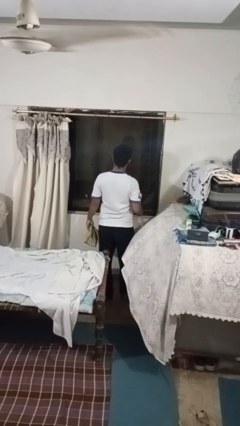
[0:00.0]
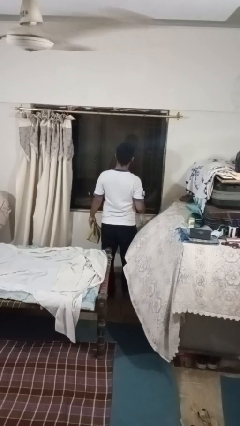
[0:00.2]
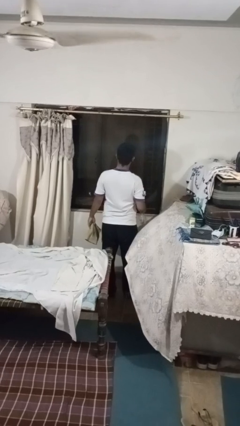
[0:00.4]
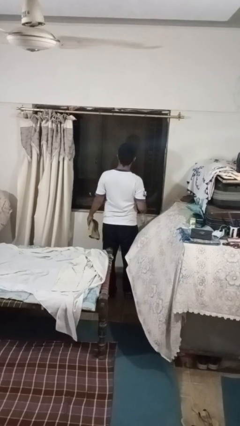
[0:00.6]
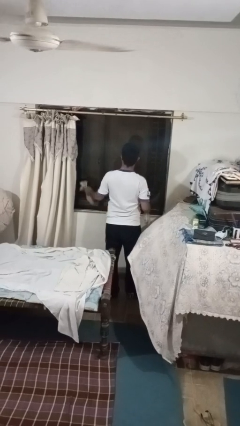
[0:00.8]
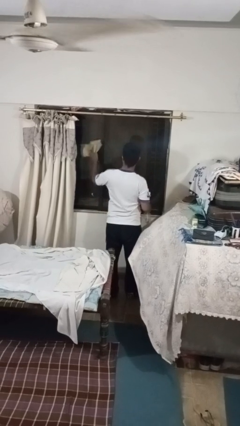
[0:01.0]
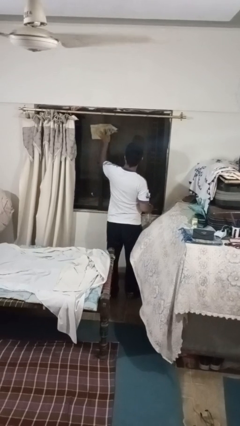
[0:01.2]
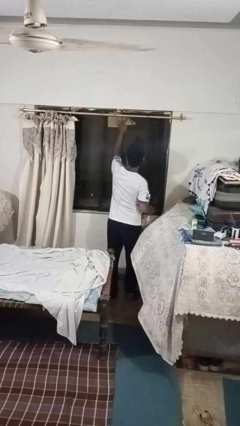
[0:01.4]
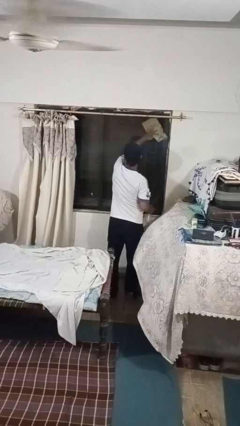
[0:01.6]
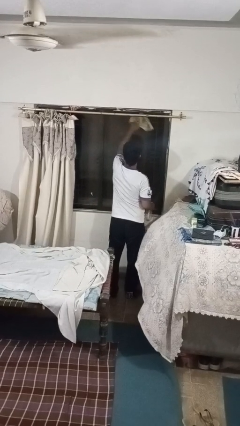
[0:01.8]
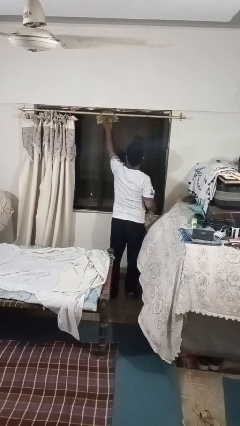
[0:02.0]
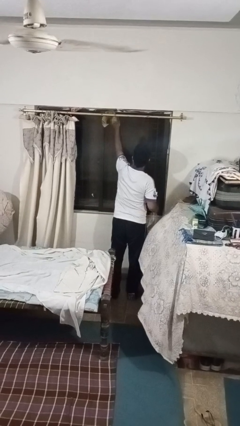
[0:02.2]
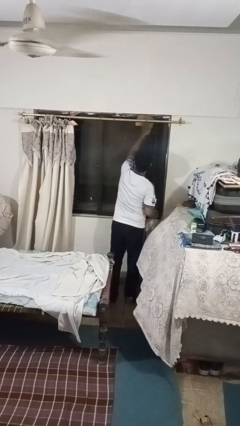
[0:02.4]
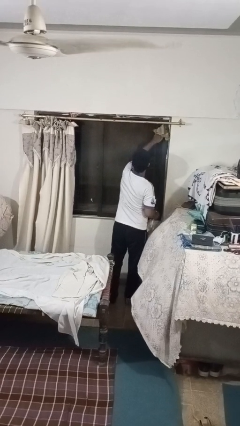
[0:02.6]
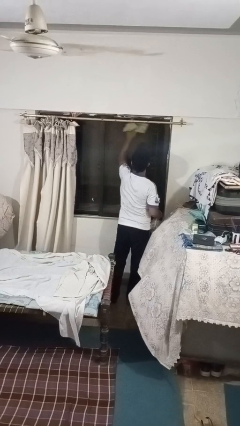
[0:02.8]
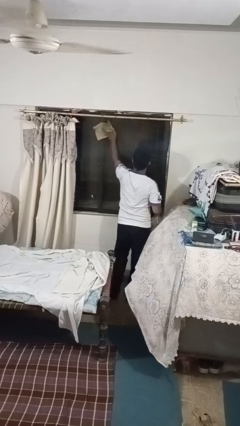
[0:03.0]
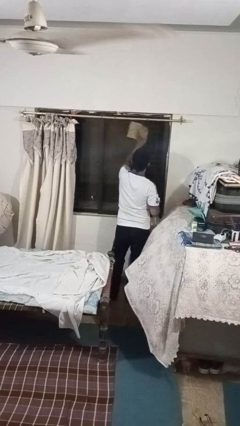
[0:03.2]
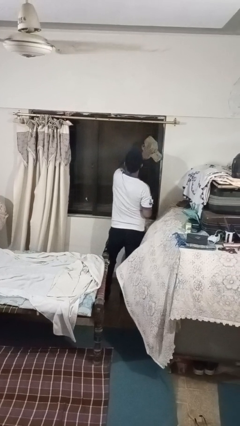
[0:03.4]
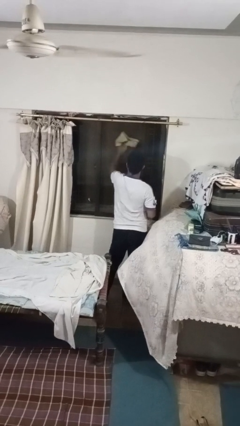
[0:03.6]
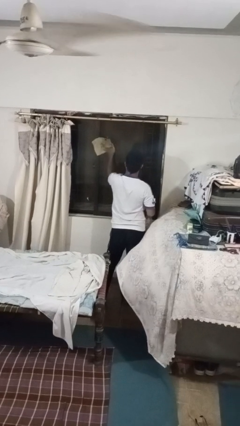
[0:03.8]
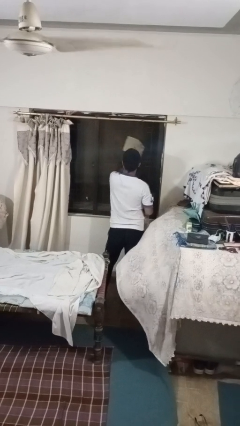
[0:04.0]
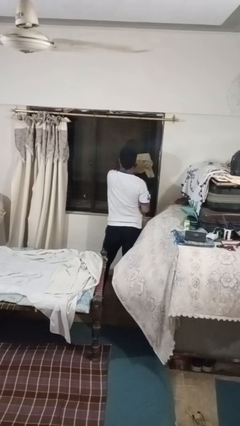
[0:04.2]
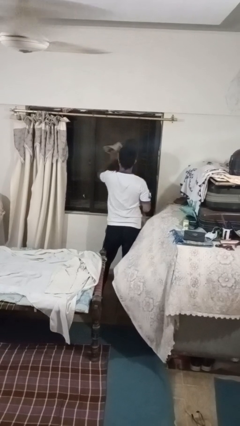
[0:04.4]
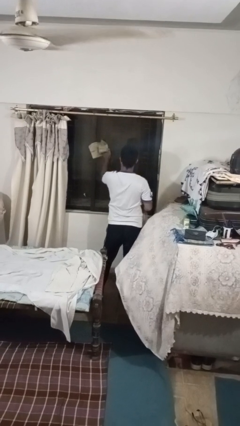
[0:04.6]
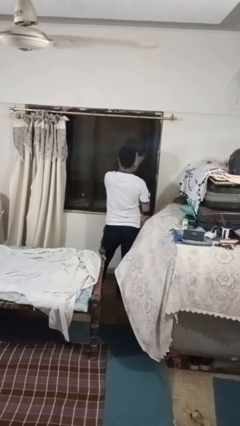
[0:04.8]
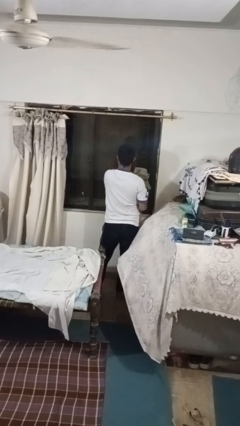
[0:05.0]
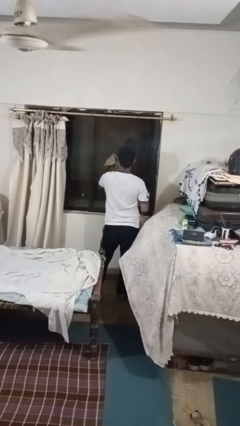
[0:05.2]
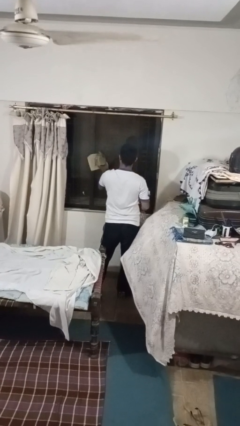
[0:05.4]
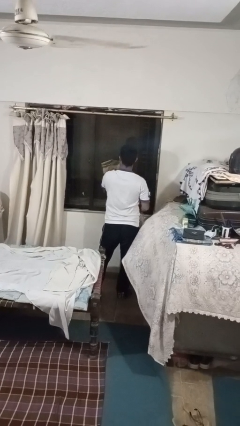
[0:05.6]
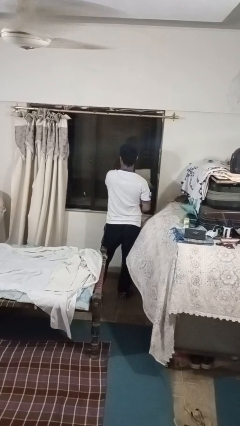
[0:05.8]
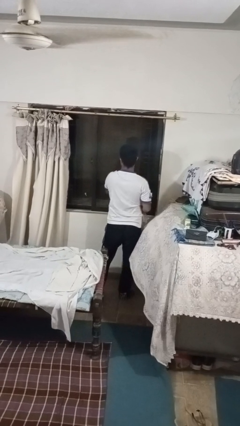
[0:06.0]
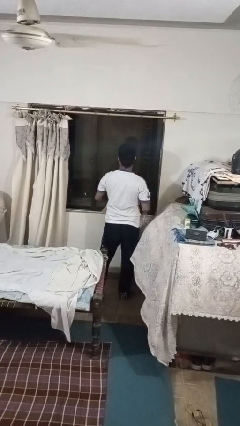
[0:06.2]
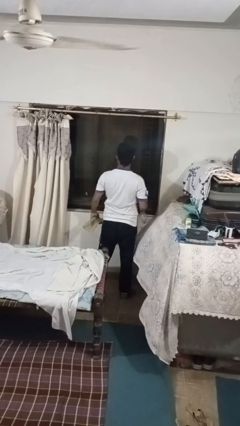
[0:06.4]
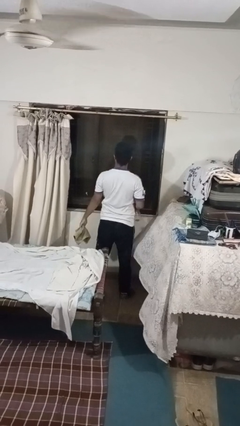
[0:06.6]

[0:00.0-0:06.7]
person washes window

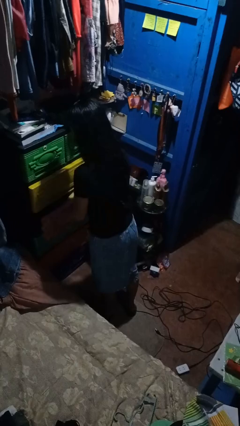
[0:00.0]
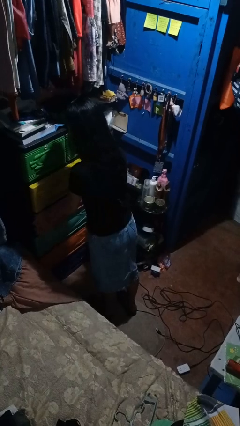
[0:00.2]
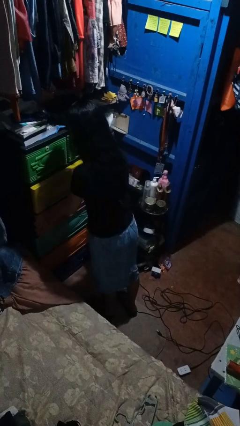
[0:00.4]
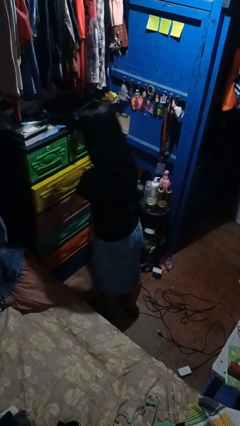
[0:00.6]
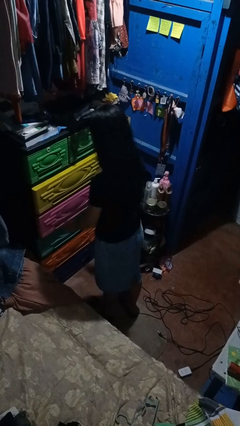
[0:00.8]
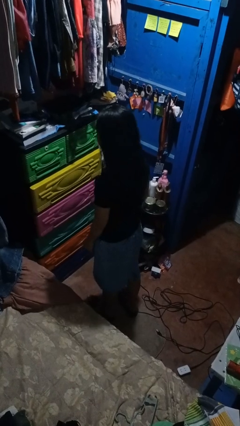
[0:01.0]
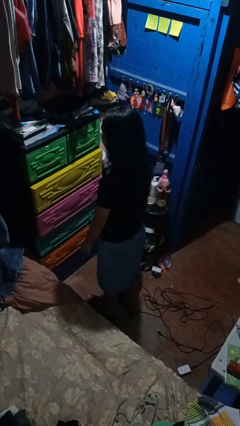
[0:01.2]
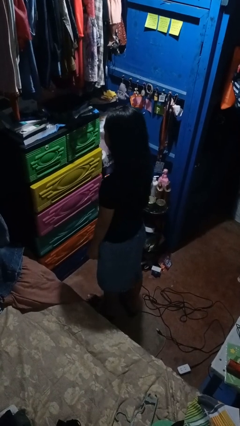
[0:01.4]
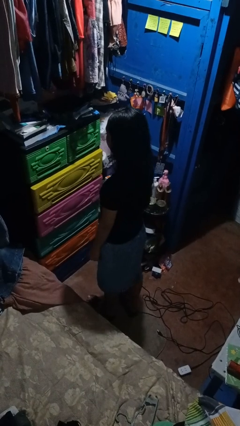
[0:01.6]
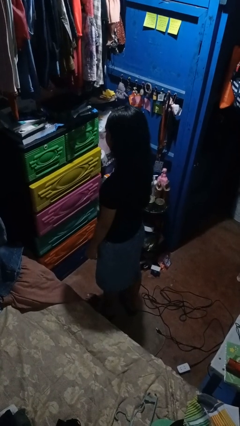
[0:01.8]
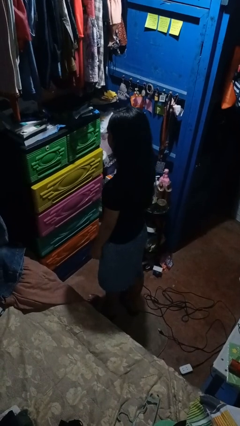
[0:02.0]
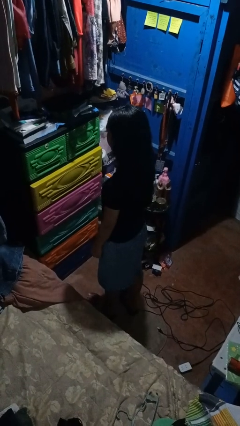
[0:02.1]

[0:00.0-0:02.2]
person closes dresser drawer

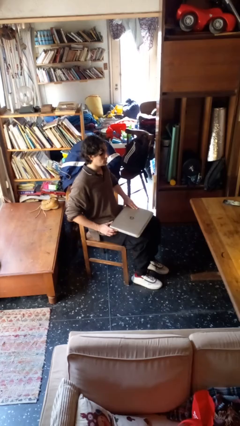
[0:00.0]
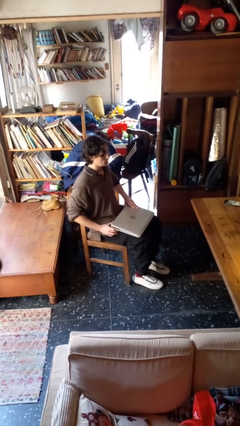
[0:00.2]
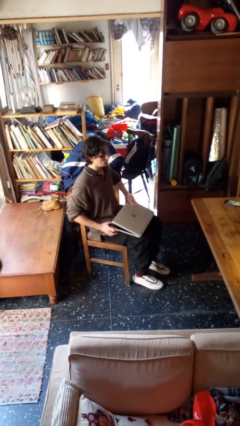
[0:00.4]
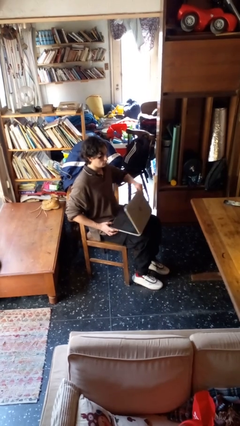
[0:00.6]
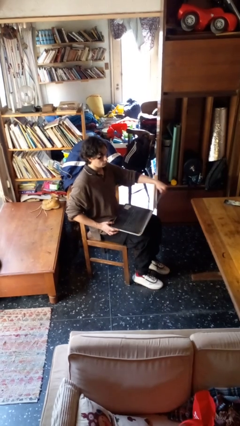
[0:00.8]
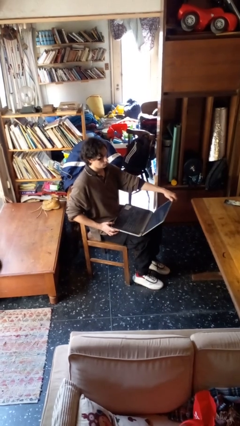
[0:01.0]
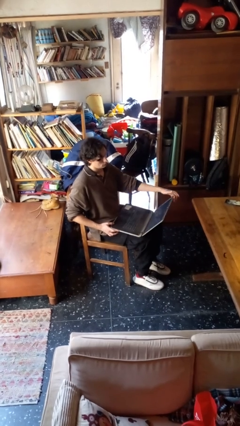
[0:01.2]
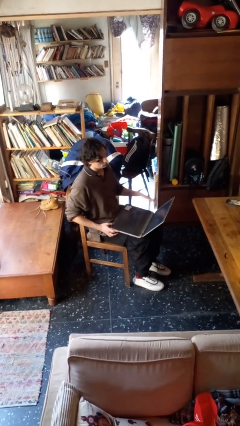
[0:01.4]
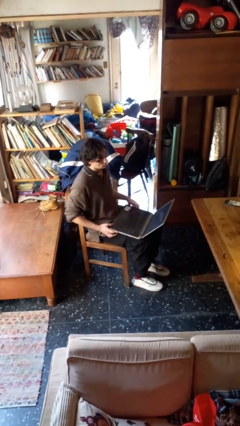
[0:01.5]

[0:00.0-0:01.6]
person opens laptop

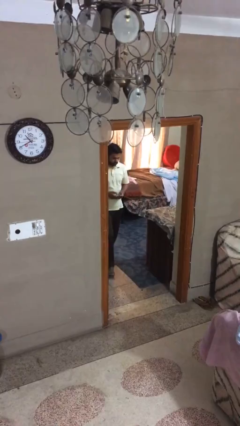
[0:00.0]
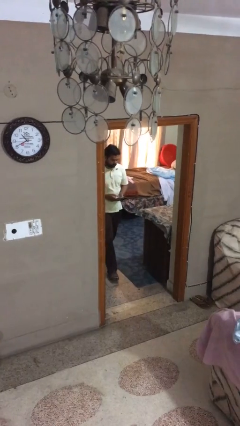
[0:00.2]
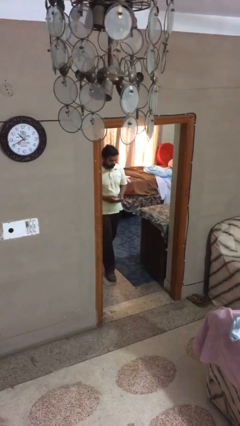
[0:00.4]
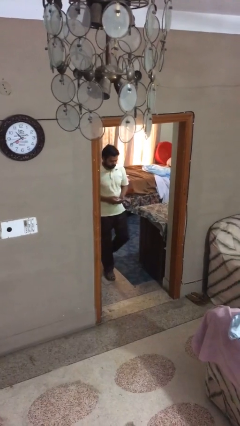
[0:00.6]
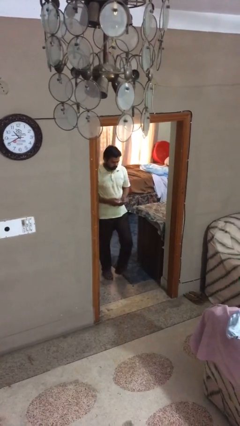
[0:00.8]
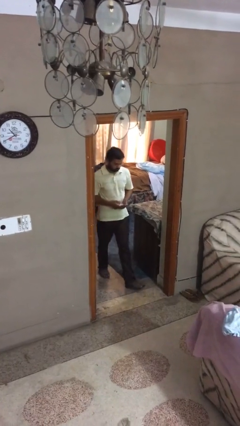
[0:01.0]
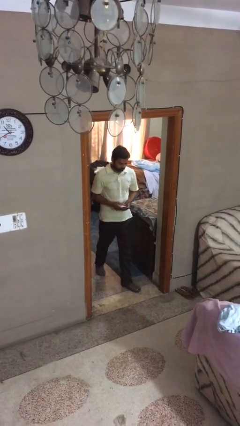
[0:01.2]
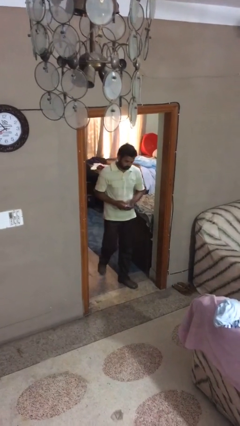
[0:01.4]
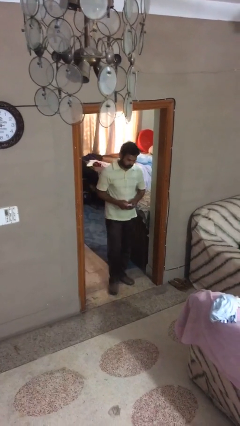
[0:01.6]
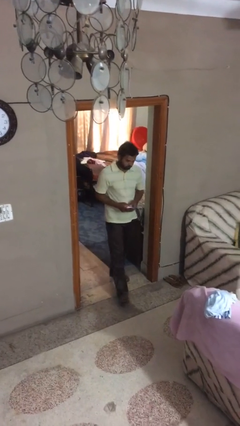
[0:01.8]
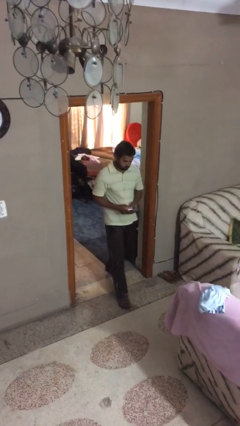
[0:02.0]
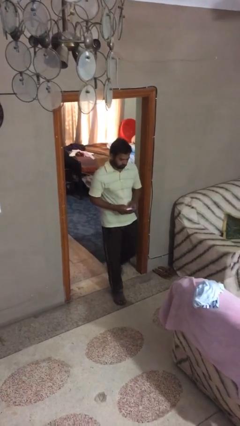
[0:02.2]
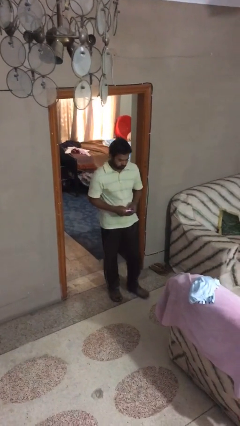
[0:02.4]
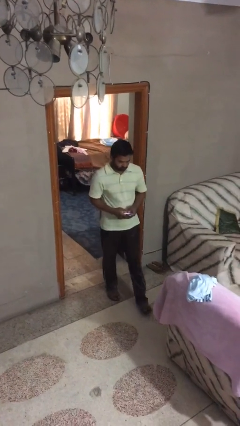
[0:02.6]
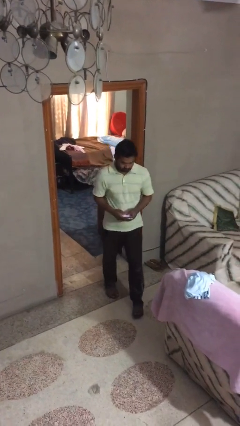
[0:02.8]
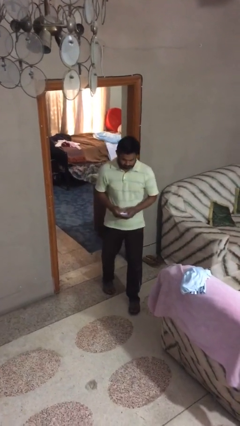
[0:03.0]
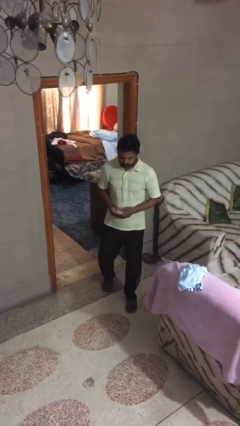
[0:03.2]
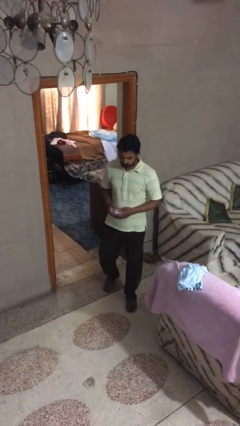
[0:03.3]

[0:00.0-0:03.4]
person enters scene through structure

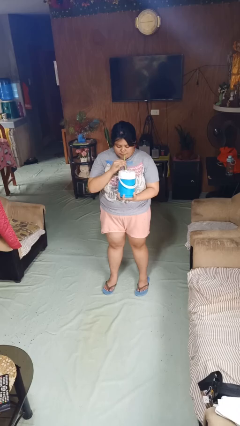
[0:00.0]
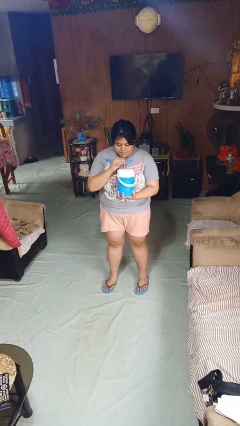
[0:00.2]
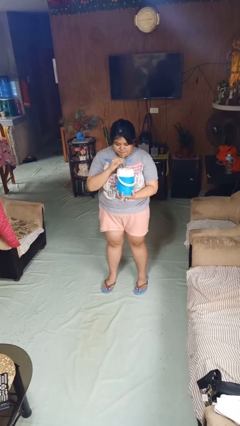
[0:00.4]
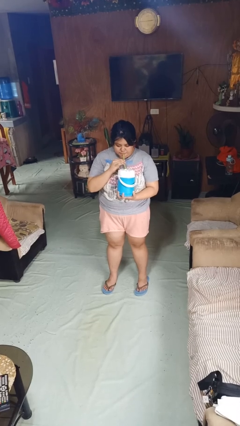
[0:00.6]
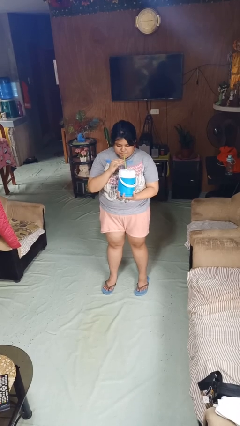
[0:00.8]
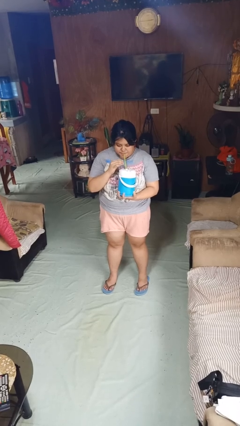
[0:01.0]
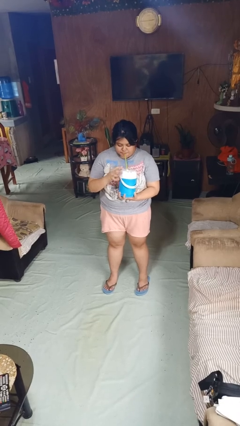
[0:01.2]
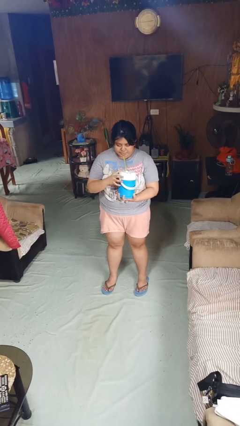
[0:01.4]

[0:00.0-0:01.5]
person drinks from straw

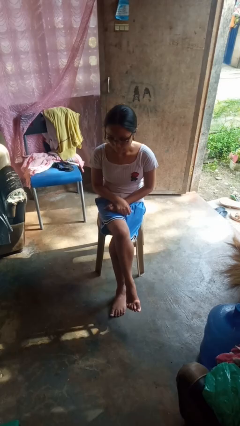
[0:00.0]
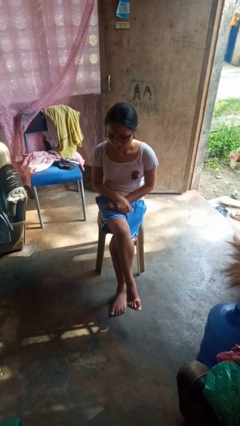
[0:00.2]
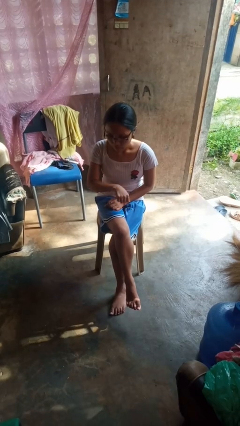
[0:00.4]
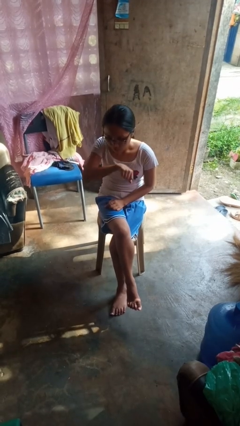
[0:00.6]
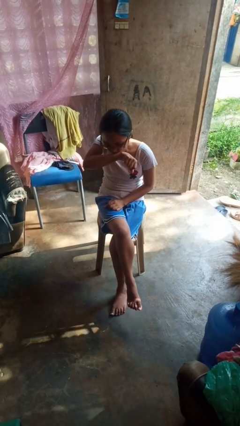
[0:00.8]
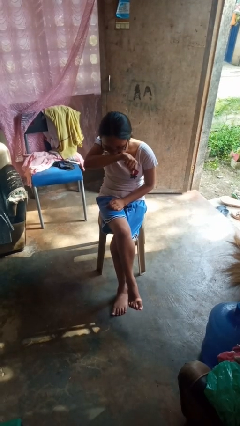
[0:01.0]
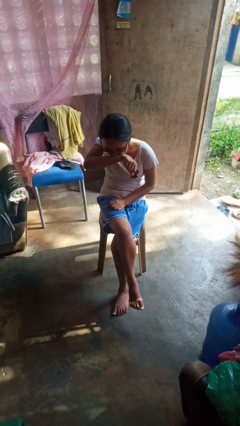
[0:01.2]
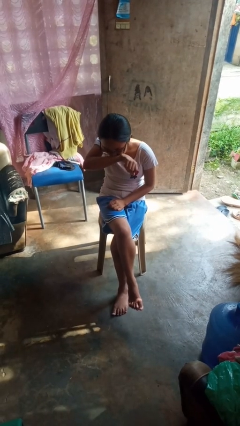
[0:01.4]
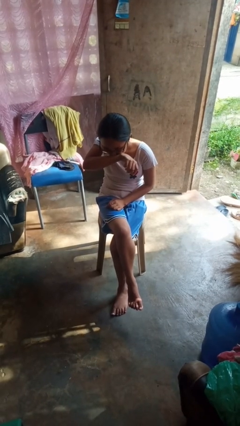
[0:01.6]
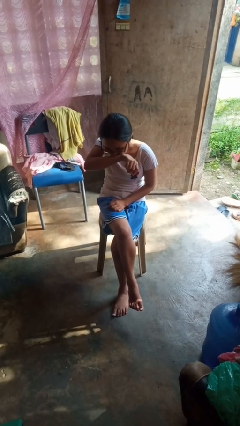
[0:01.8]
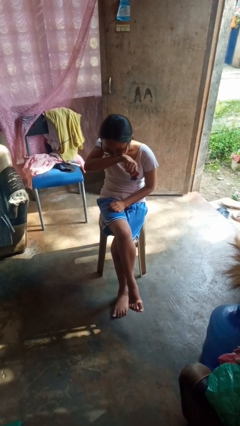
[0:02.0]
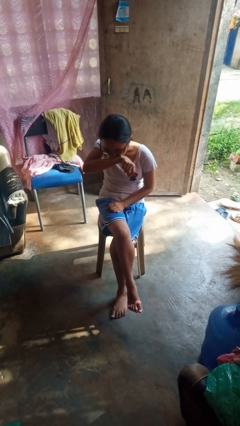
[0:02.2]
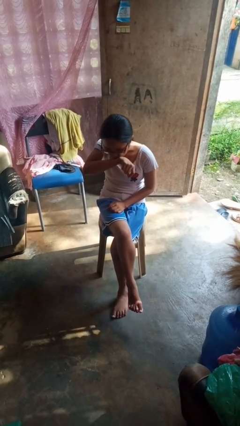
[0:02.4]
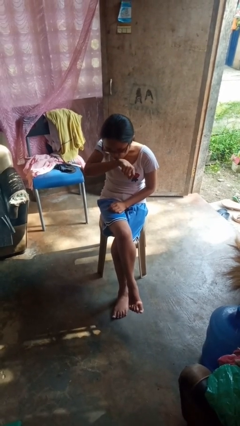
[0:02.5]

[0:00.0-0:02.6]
person sneezes into arm
